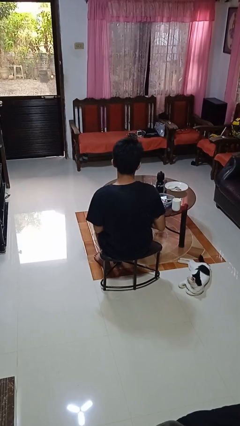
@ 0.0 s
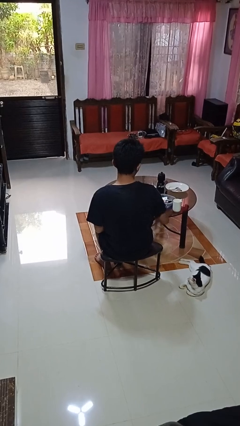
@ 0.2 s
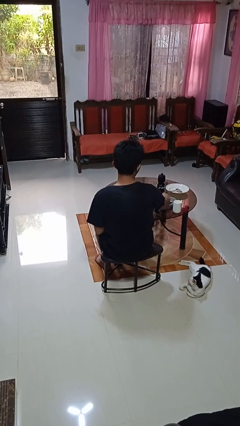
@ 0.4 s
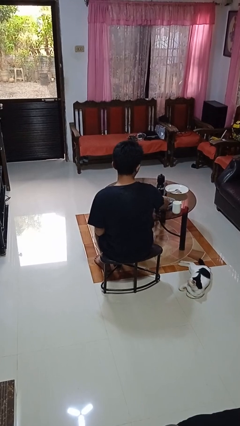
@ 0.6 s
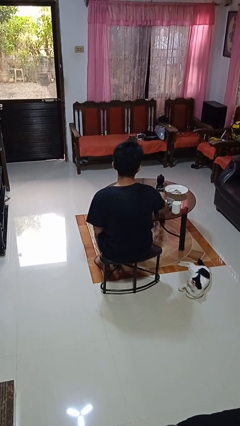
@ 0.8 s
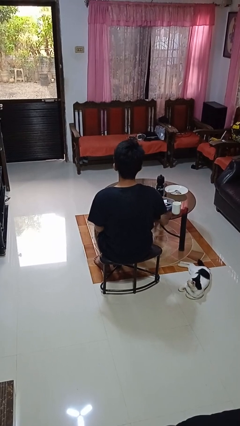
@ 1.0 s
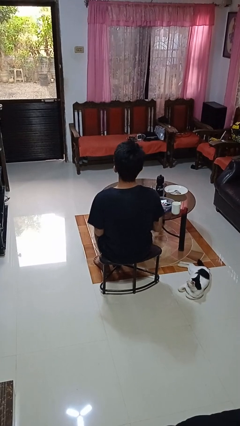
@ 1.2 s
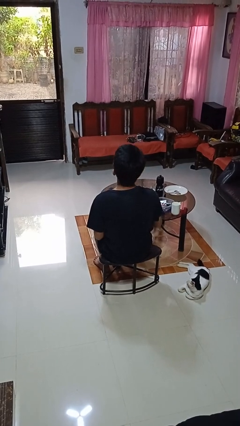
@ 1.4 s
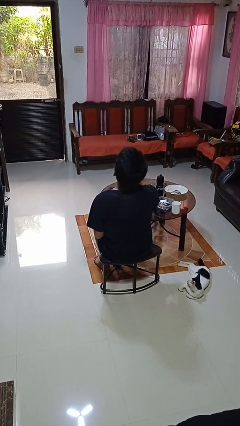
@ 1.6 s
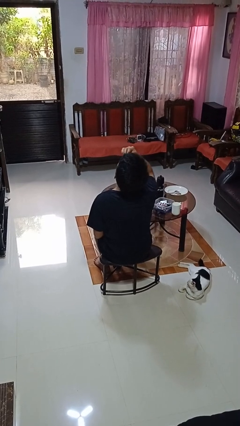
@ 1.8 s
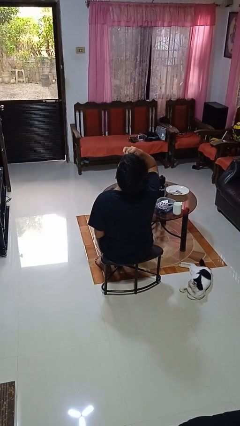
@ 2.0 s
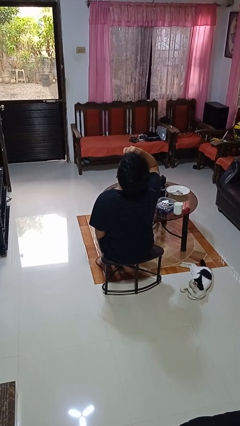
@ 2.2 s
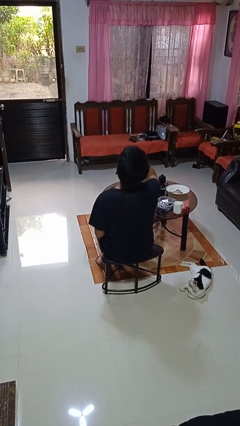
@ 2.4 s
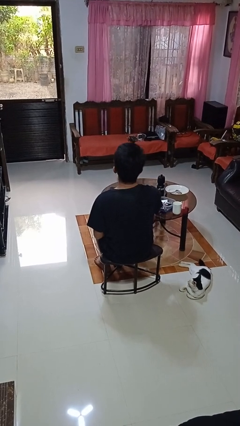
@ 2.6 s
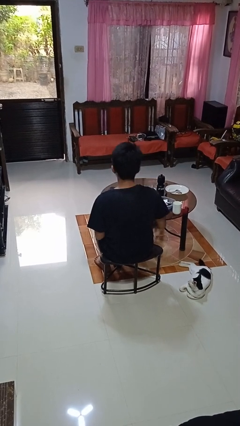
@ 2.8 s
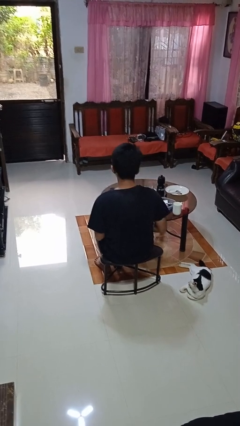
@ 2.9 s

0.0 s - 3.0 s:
person takes medicine pills

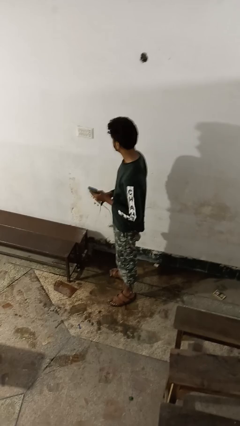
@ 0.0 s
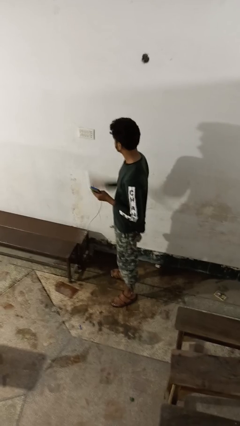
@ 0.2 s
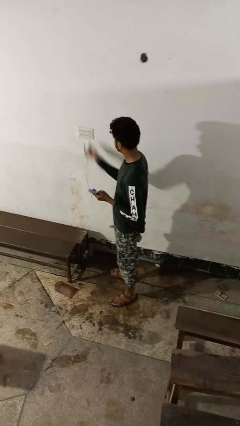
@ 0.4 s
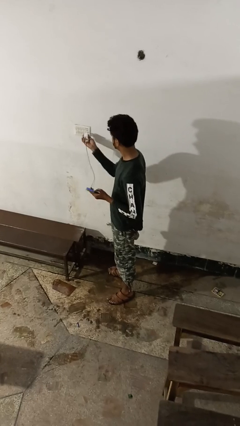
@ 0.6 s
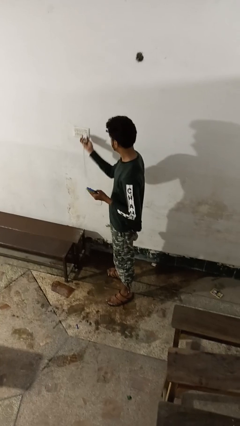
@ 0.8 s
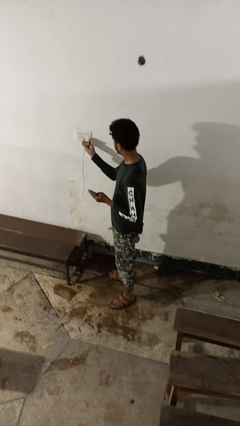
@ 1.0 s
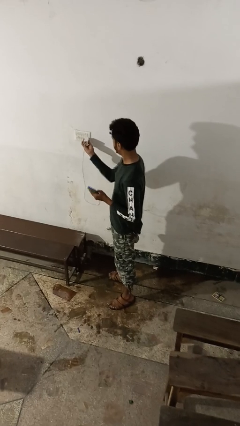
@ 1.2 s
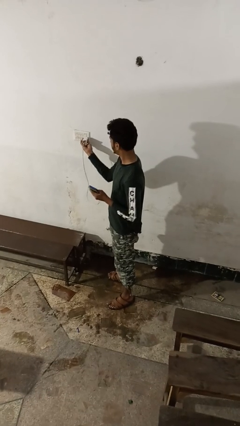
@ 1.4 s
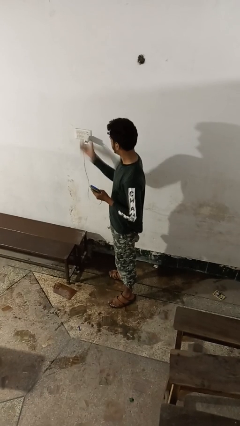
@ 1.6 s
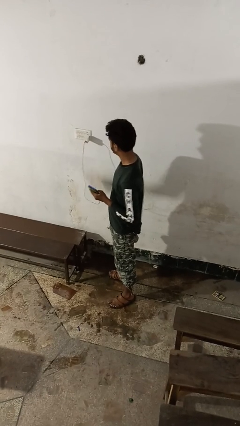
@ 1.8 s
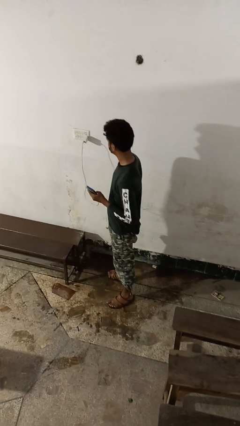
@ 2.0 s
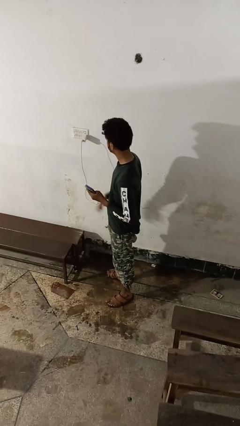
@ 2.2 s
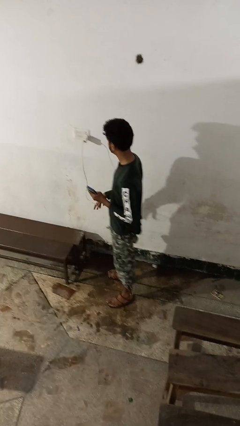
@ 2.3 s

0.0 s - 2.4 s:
person plugs into electrical socket

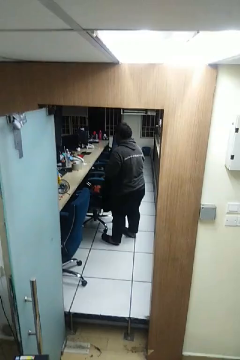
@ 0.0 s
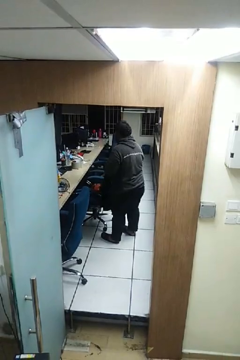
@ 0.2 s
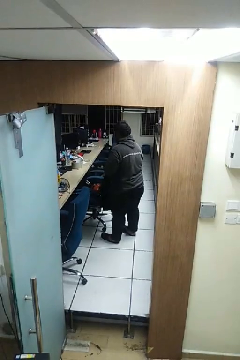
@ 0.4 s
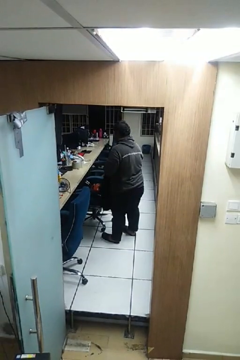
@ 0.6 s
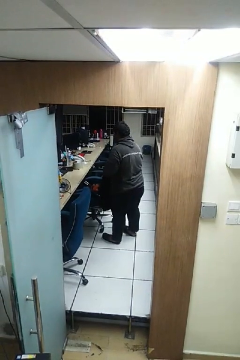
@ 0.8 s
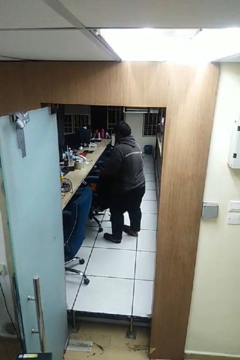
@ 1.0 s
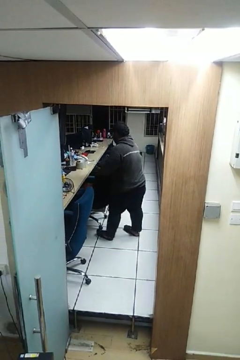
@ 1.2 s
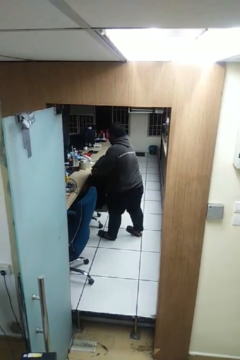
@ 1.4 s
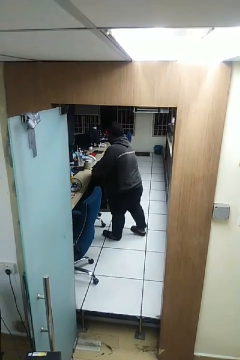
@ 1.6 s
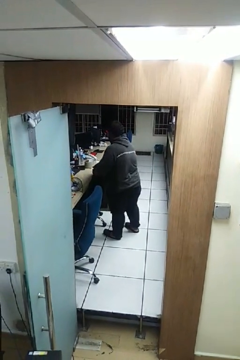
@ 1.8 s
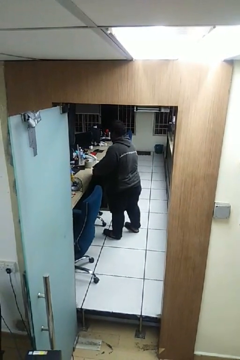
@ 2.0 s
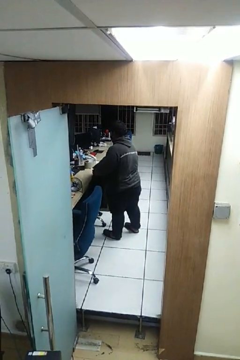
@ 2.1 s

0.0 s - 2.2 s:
person pushes in chair

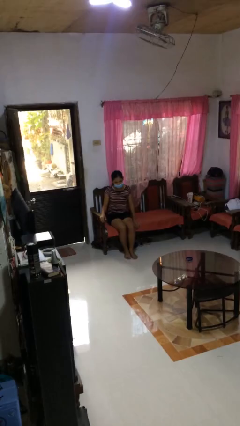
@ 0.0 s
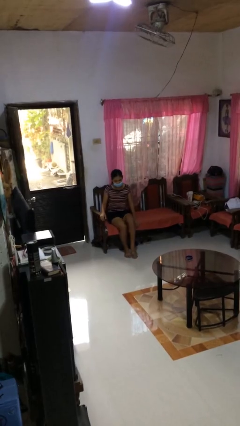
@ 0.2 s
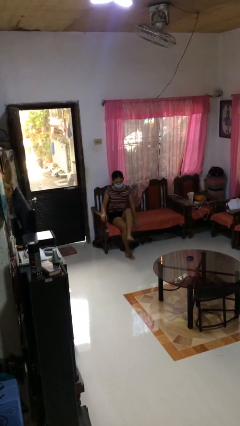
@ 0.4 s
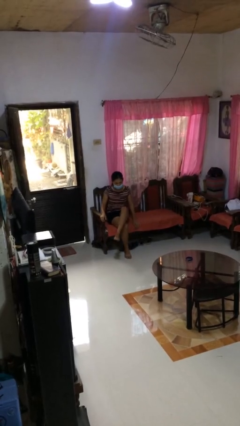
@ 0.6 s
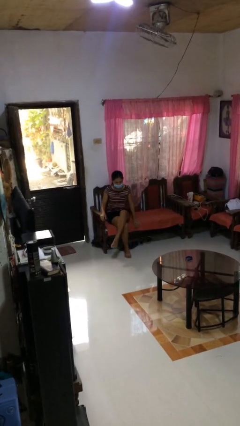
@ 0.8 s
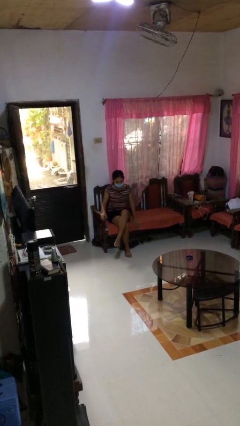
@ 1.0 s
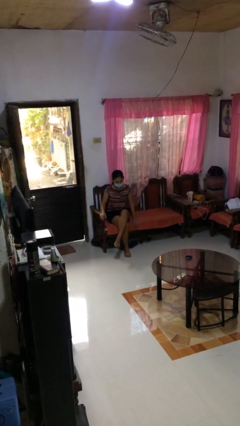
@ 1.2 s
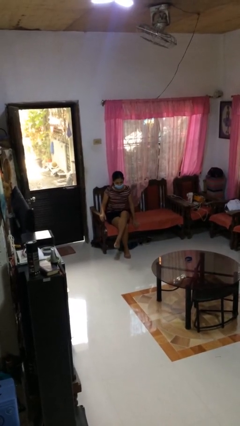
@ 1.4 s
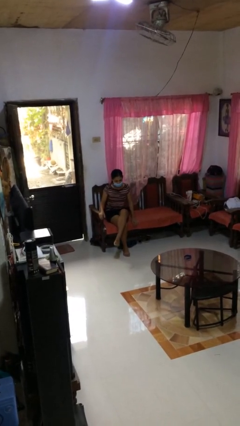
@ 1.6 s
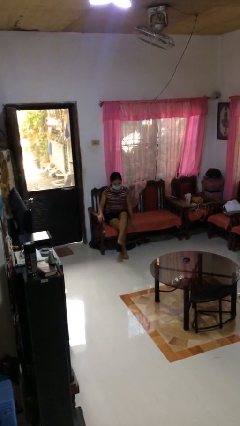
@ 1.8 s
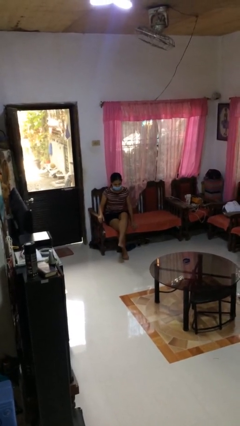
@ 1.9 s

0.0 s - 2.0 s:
person crosses legs

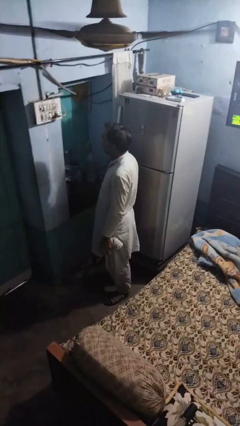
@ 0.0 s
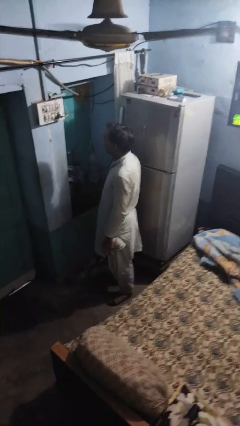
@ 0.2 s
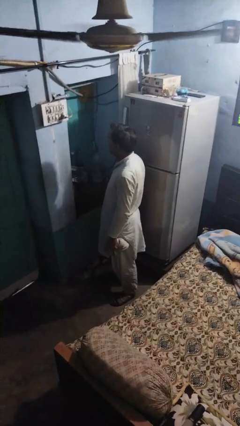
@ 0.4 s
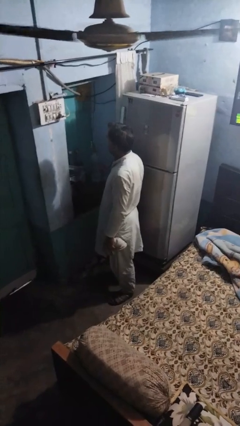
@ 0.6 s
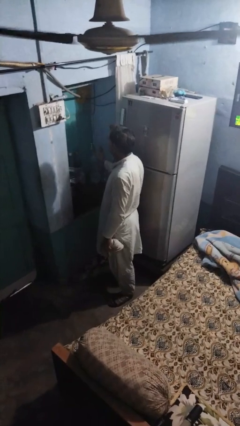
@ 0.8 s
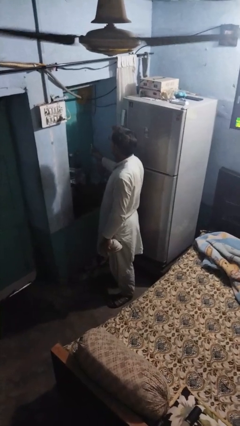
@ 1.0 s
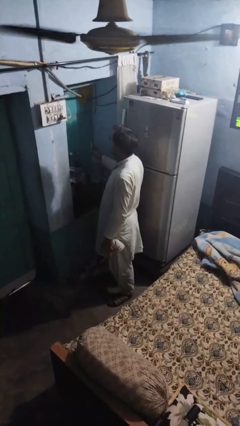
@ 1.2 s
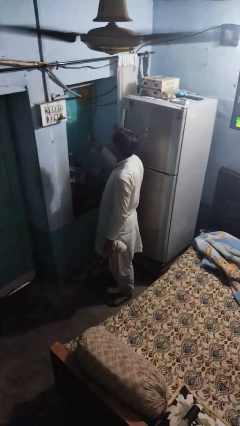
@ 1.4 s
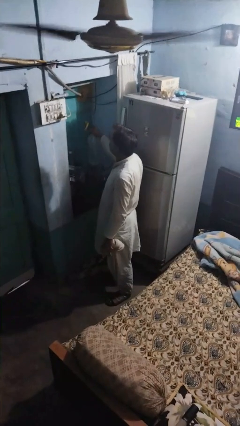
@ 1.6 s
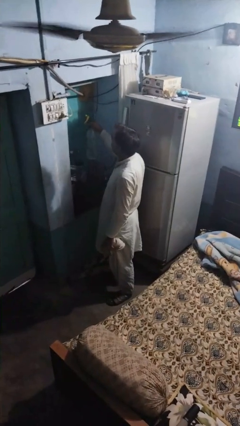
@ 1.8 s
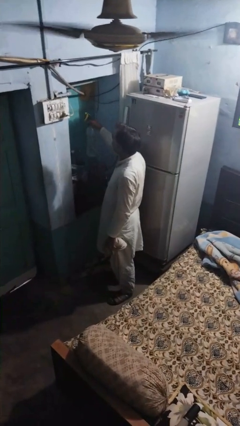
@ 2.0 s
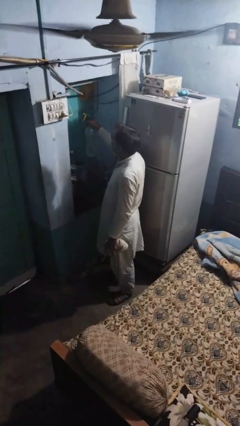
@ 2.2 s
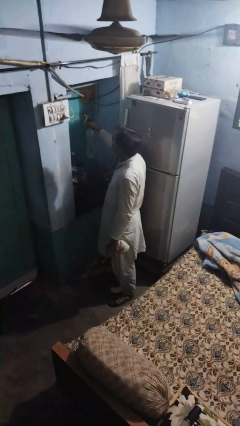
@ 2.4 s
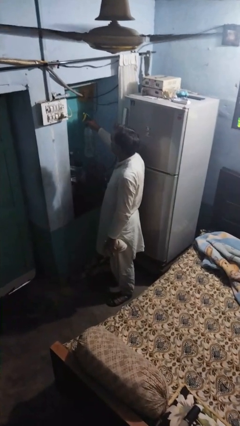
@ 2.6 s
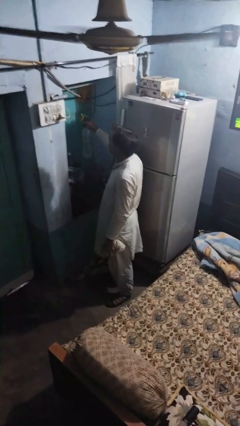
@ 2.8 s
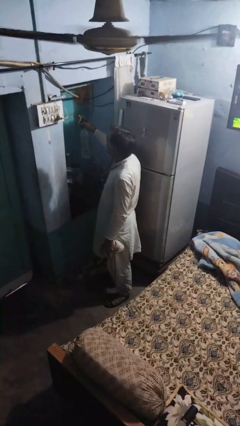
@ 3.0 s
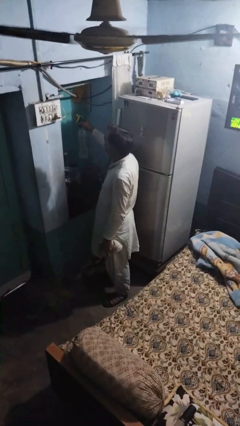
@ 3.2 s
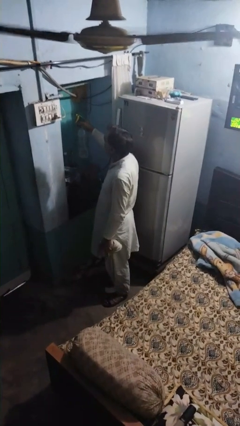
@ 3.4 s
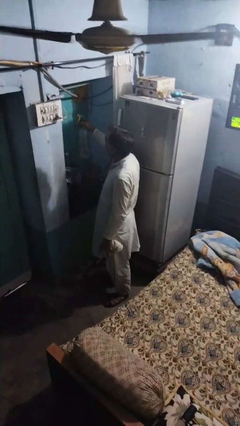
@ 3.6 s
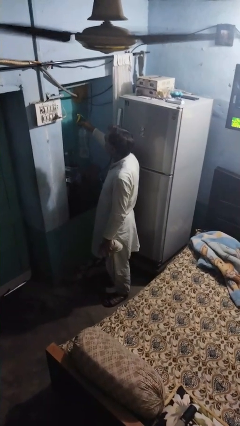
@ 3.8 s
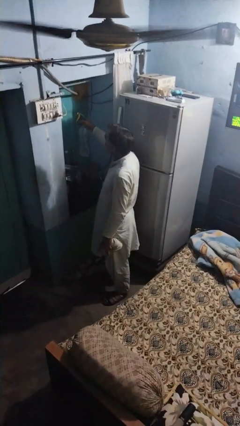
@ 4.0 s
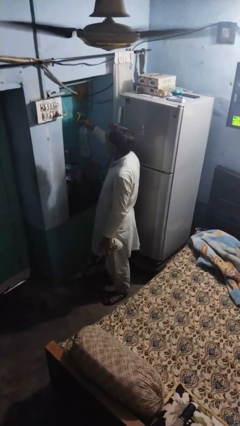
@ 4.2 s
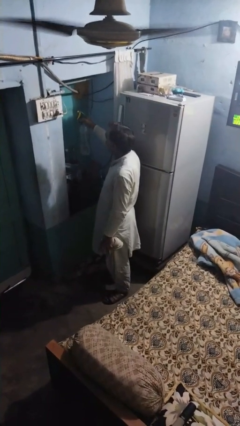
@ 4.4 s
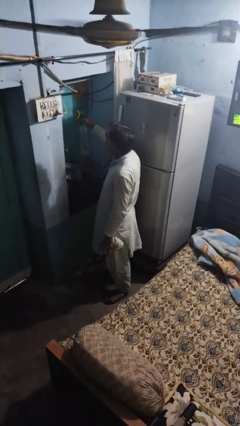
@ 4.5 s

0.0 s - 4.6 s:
person sprays from bottle

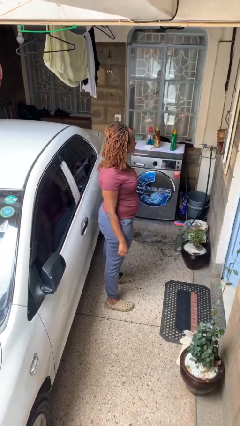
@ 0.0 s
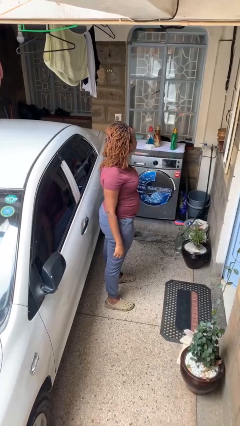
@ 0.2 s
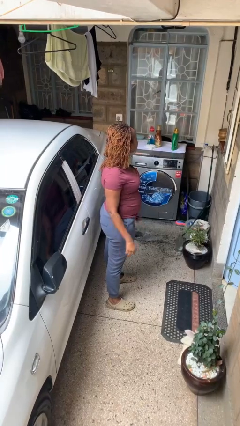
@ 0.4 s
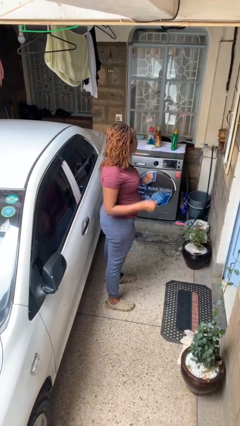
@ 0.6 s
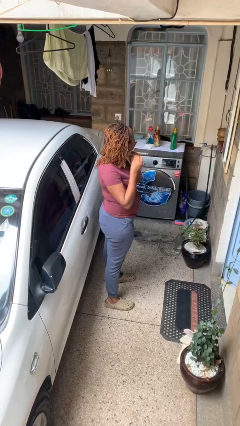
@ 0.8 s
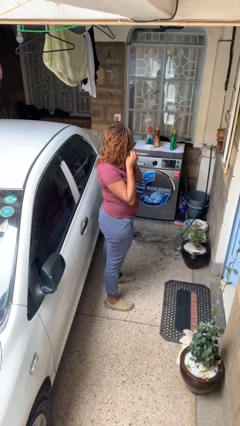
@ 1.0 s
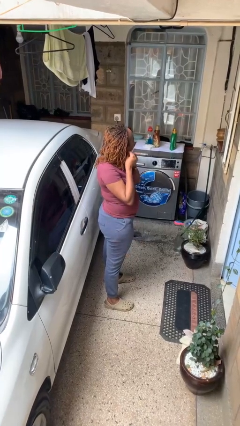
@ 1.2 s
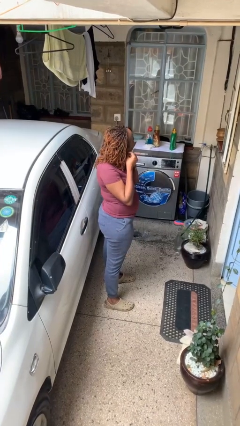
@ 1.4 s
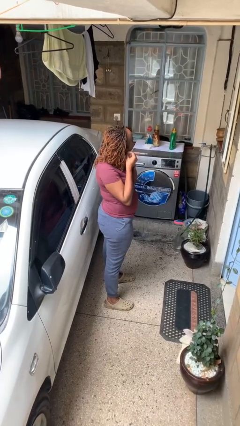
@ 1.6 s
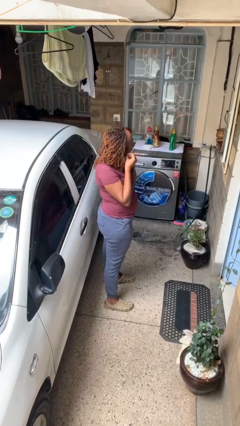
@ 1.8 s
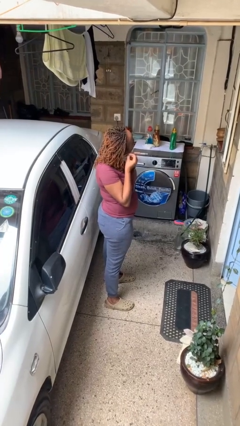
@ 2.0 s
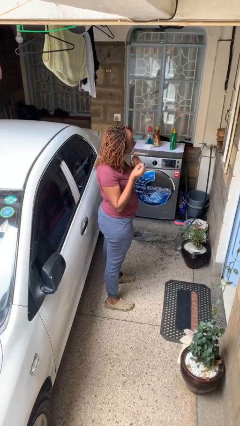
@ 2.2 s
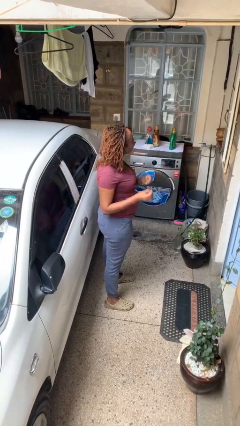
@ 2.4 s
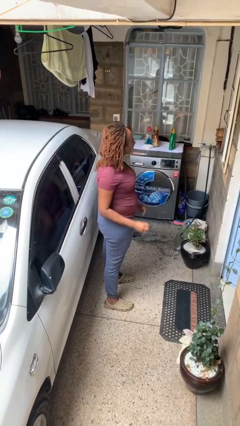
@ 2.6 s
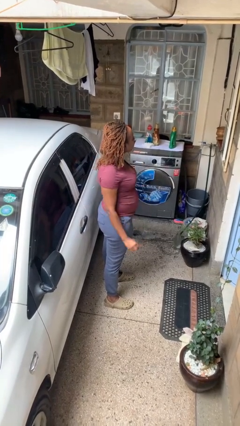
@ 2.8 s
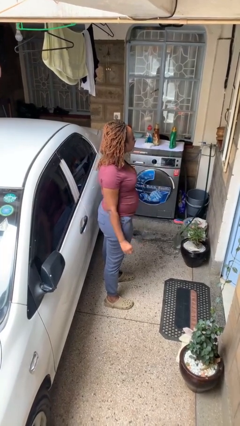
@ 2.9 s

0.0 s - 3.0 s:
person takes off earrings
